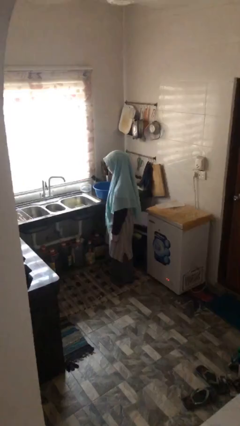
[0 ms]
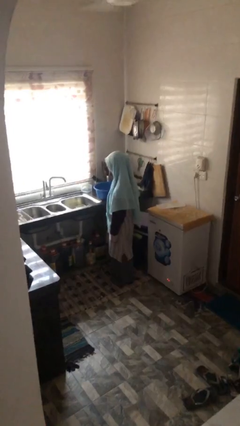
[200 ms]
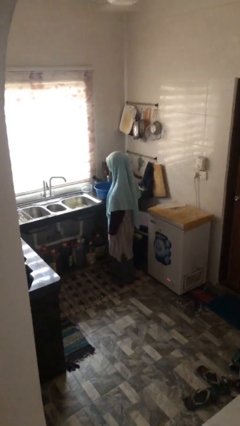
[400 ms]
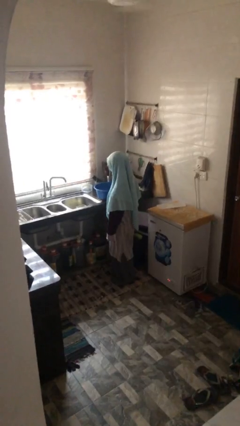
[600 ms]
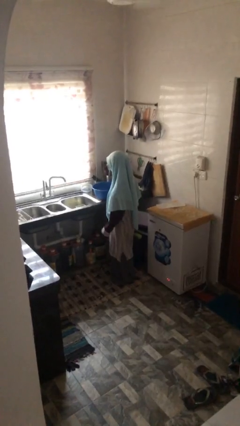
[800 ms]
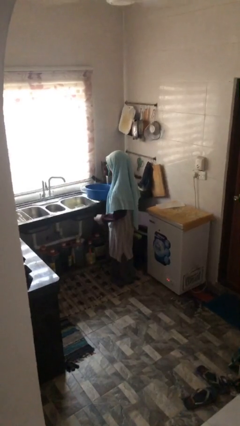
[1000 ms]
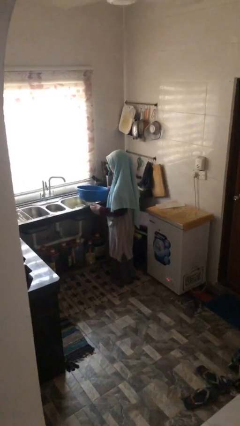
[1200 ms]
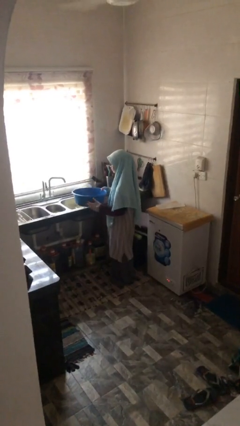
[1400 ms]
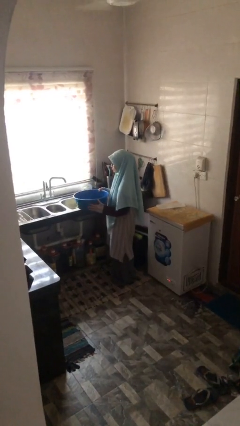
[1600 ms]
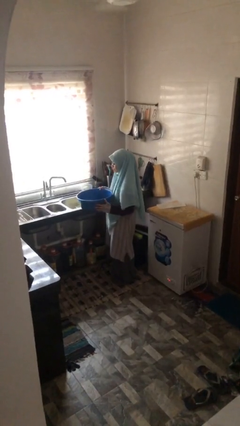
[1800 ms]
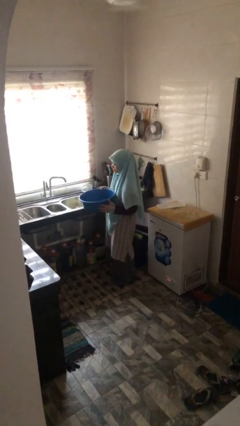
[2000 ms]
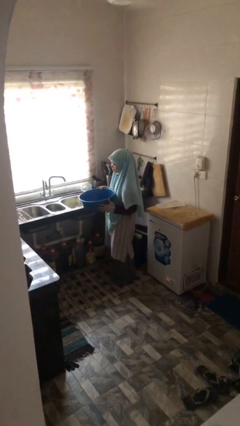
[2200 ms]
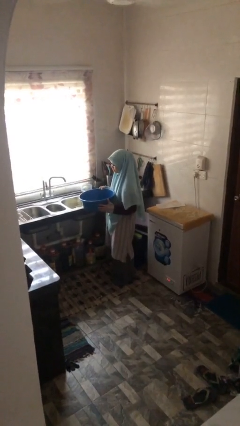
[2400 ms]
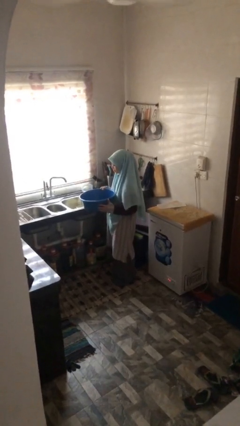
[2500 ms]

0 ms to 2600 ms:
person picks up object from countertop

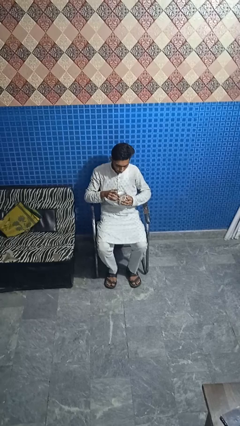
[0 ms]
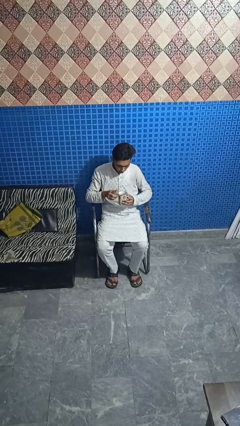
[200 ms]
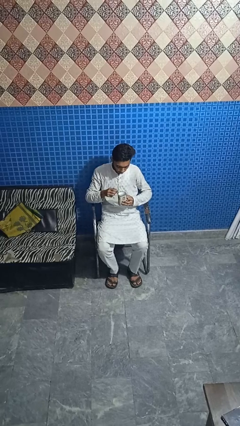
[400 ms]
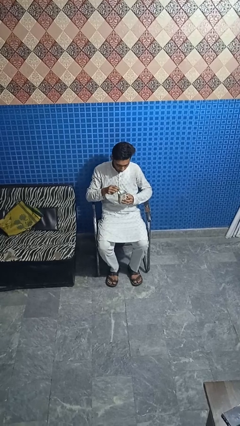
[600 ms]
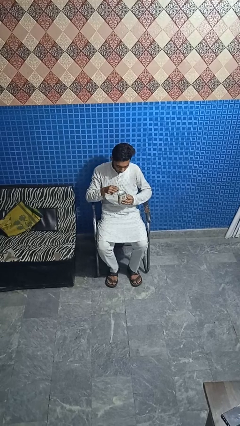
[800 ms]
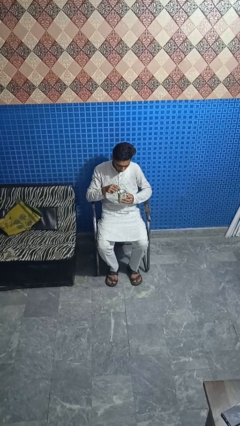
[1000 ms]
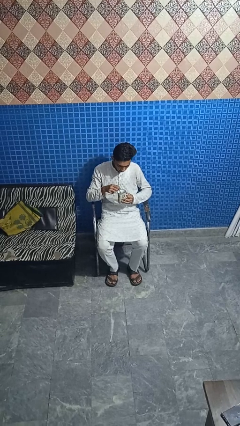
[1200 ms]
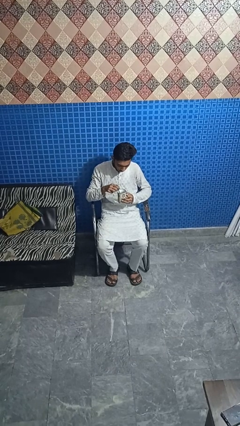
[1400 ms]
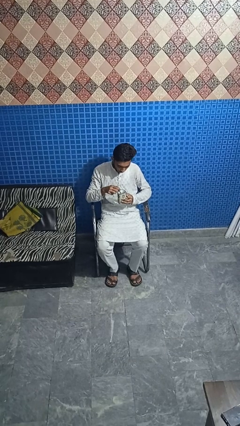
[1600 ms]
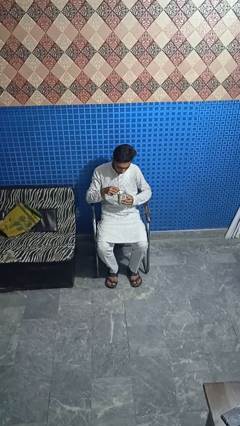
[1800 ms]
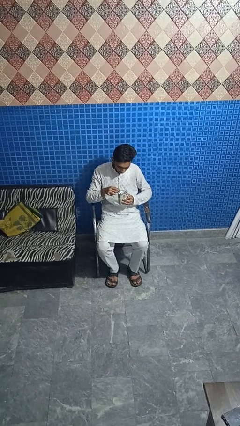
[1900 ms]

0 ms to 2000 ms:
person stirs mug

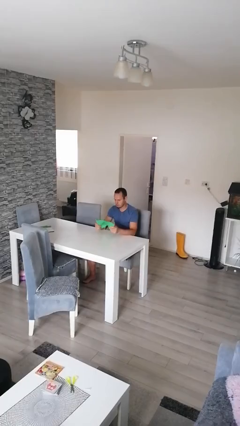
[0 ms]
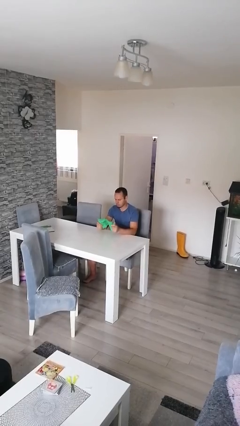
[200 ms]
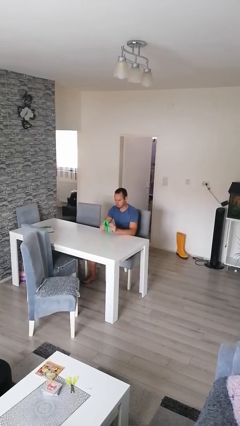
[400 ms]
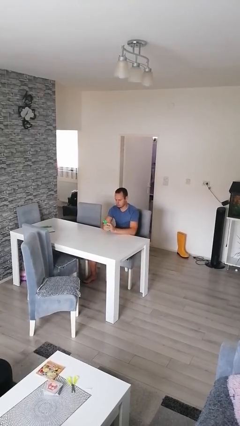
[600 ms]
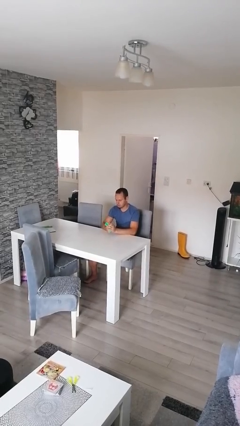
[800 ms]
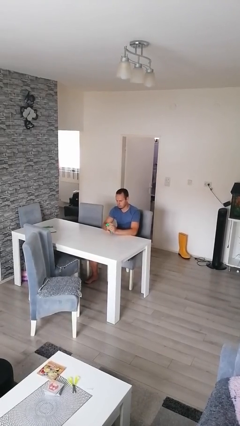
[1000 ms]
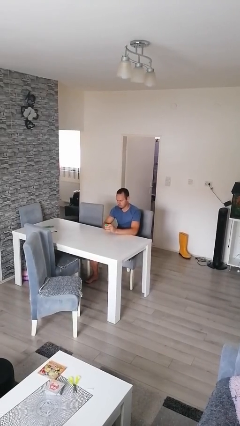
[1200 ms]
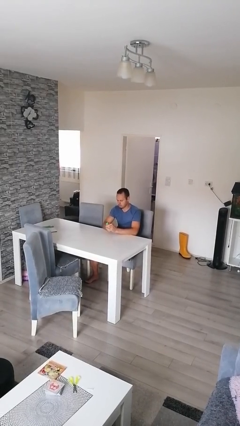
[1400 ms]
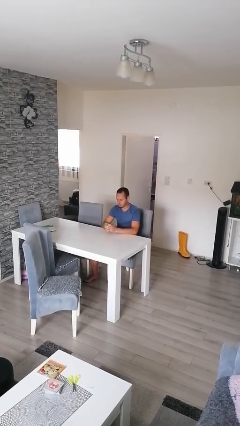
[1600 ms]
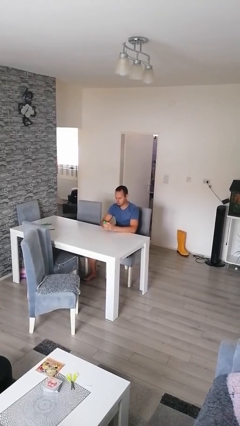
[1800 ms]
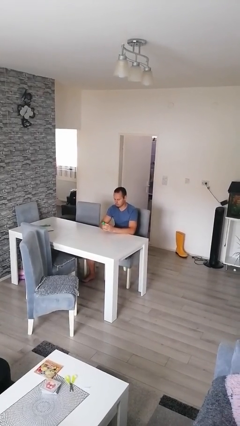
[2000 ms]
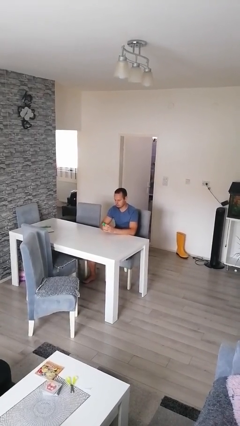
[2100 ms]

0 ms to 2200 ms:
person crumples paper

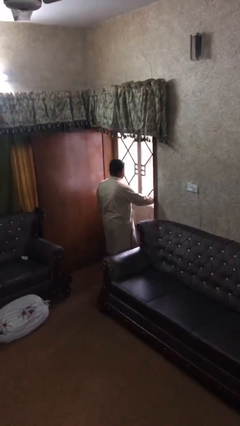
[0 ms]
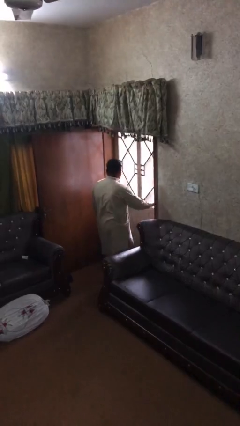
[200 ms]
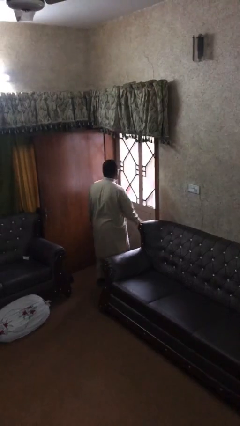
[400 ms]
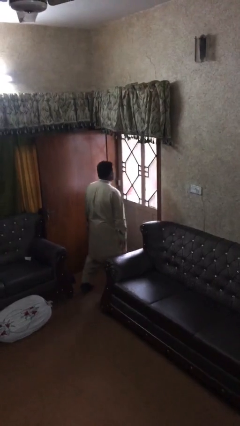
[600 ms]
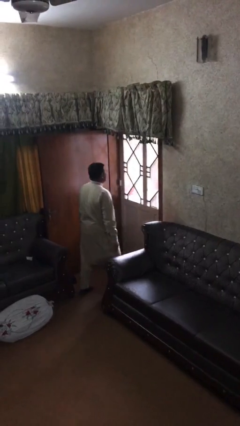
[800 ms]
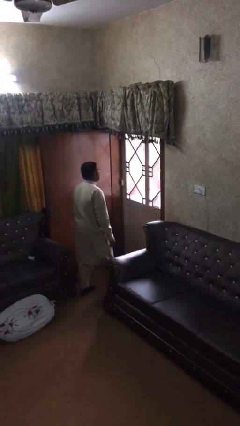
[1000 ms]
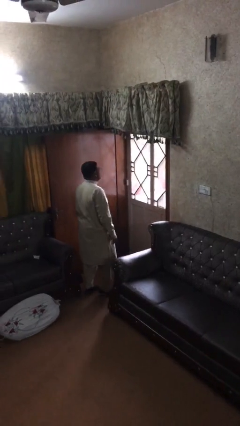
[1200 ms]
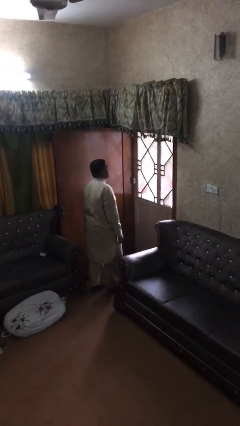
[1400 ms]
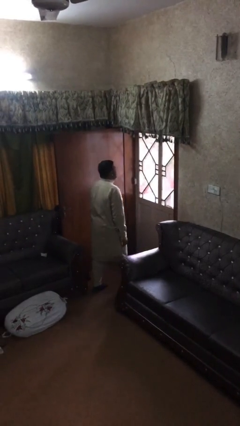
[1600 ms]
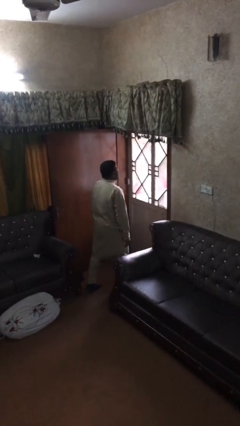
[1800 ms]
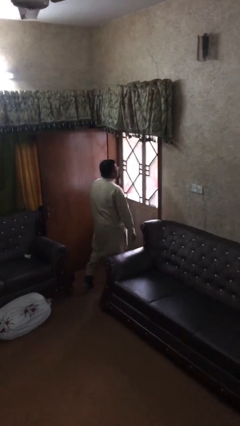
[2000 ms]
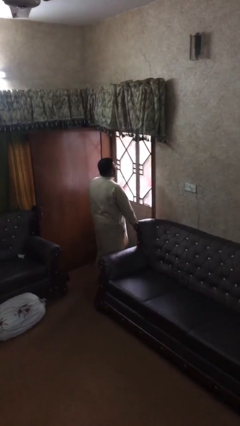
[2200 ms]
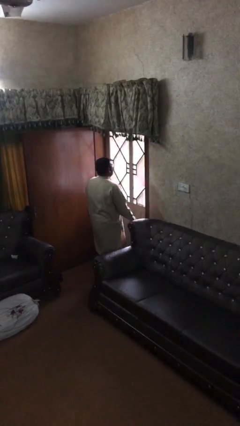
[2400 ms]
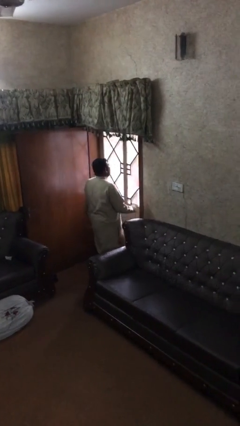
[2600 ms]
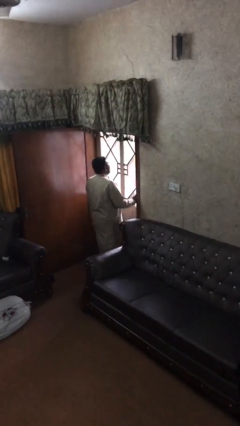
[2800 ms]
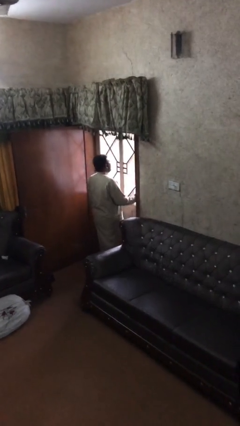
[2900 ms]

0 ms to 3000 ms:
person closes facility door

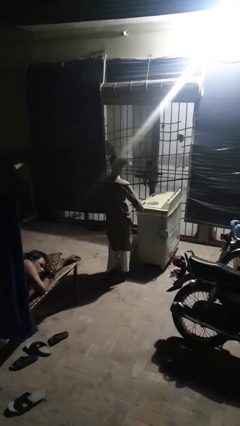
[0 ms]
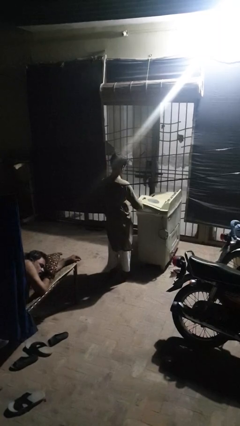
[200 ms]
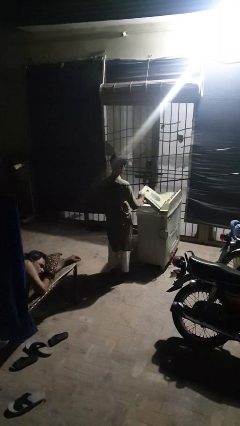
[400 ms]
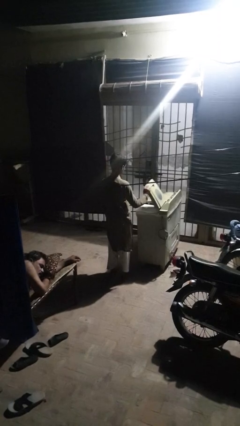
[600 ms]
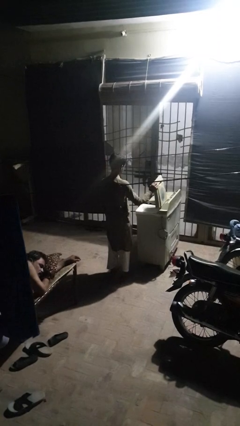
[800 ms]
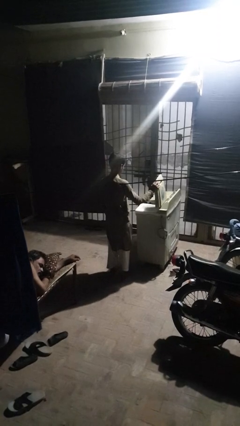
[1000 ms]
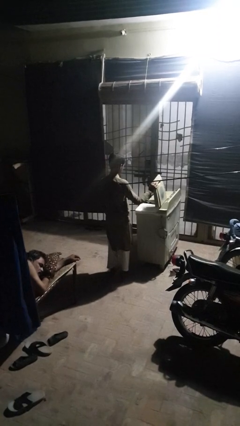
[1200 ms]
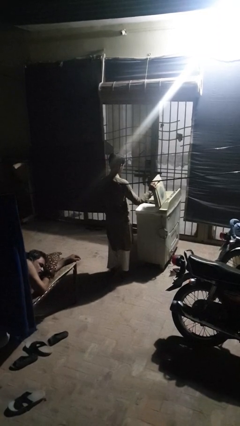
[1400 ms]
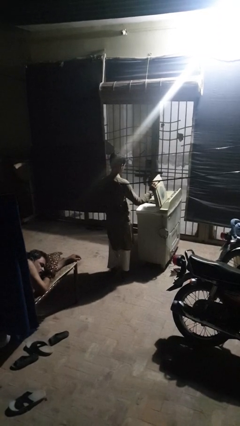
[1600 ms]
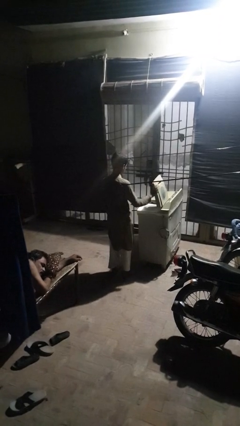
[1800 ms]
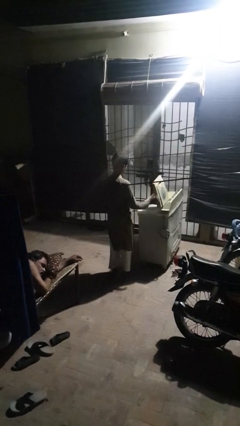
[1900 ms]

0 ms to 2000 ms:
person opens clothes washer

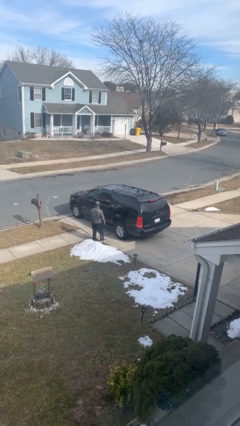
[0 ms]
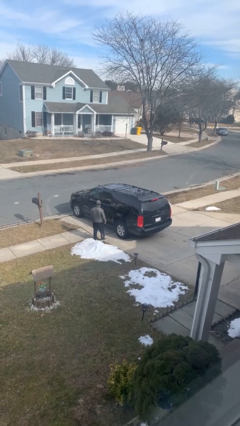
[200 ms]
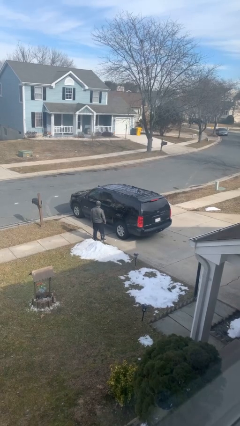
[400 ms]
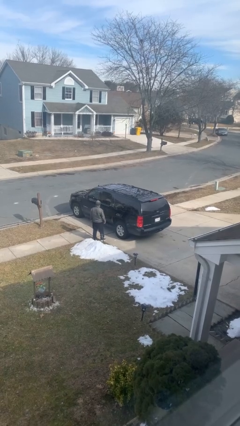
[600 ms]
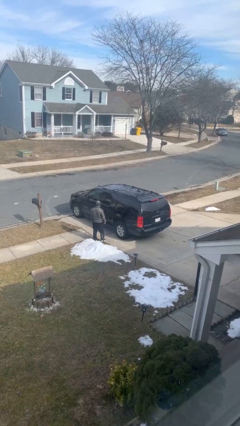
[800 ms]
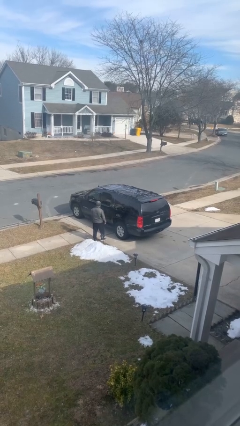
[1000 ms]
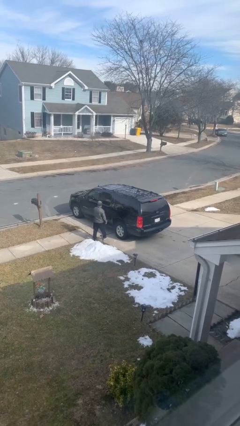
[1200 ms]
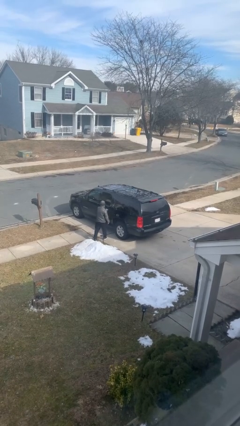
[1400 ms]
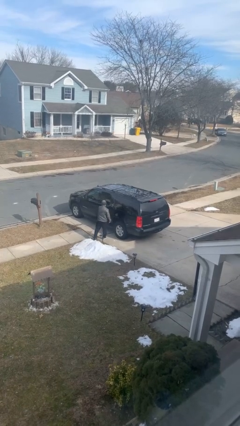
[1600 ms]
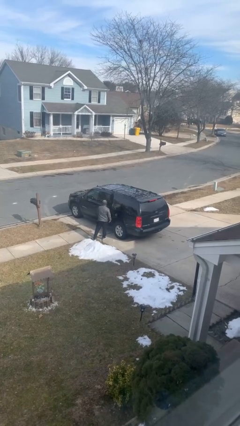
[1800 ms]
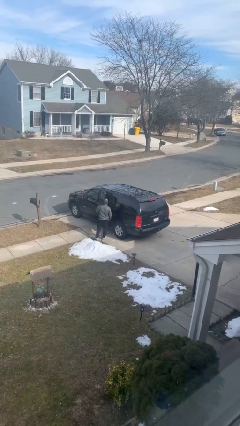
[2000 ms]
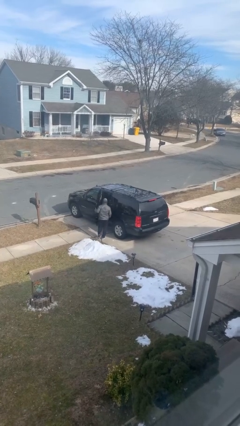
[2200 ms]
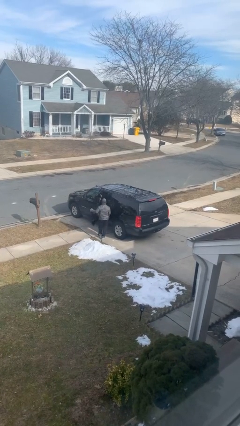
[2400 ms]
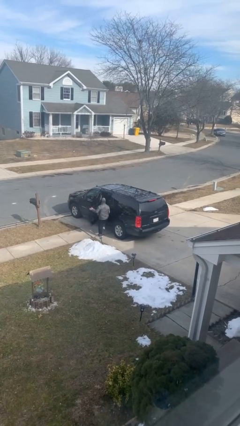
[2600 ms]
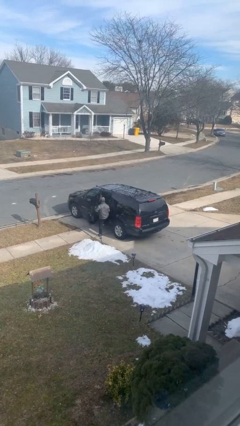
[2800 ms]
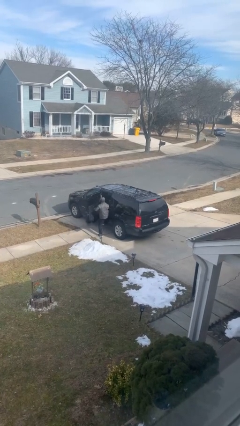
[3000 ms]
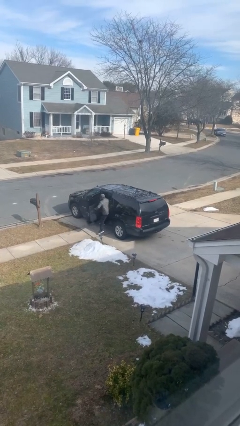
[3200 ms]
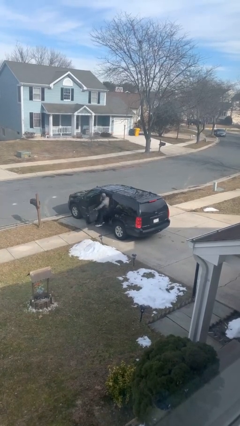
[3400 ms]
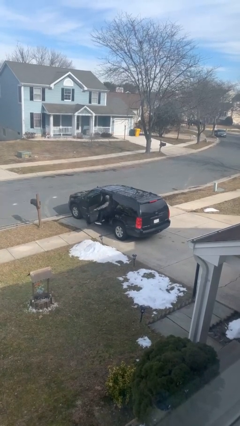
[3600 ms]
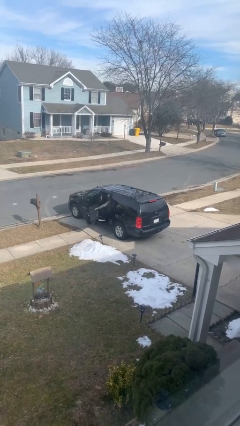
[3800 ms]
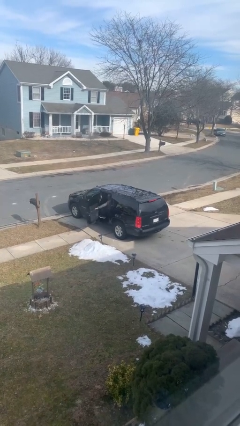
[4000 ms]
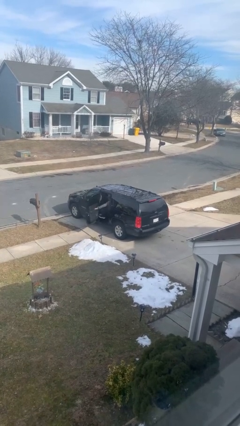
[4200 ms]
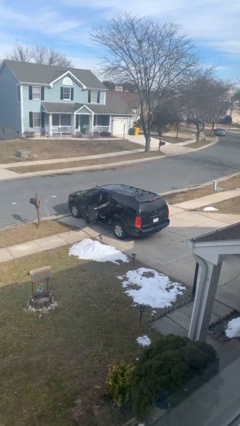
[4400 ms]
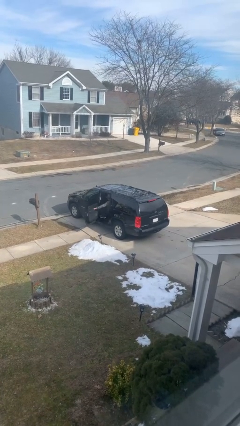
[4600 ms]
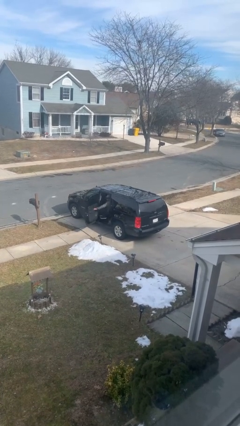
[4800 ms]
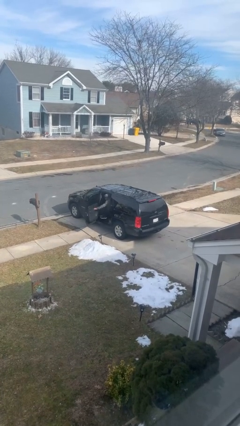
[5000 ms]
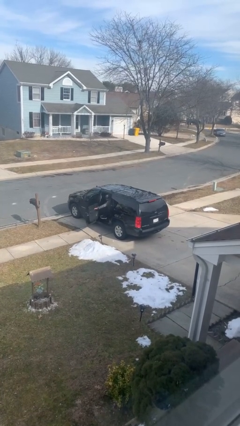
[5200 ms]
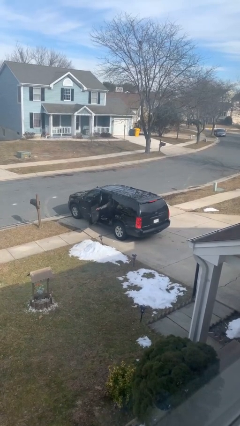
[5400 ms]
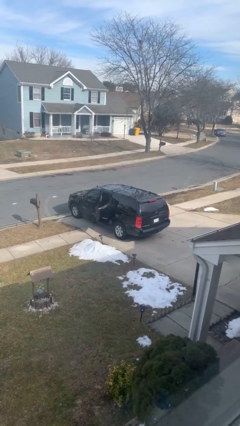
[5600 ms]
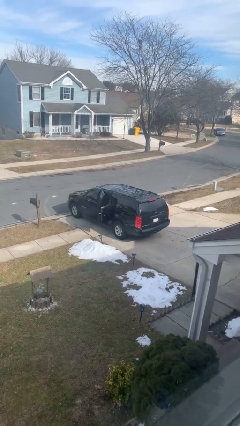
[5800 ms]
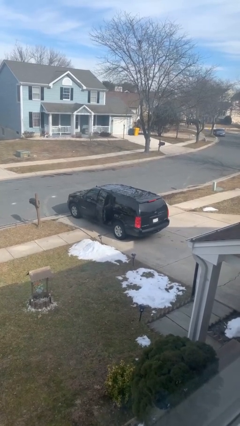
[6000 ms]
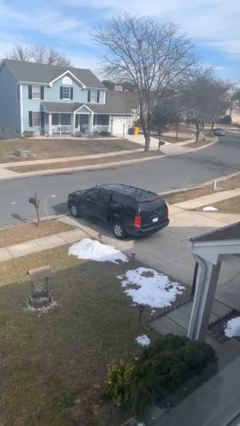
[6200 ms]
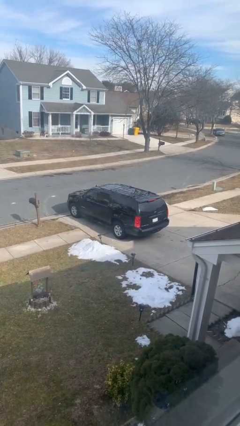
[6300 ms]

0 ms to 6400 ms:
car picks up person
